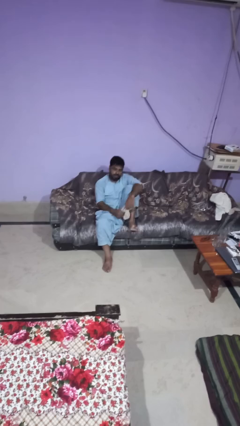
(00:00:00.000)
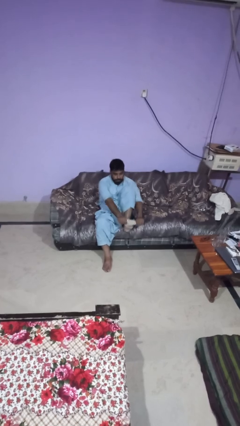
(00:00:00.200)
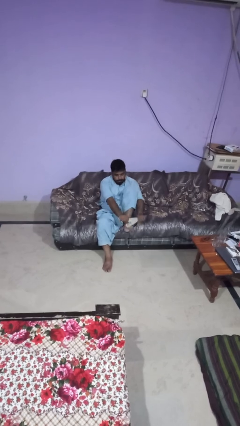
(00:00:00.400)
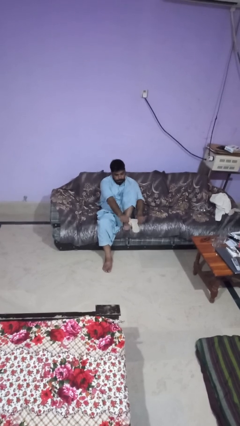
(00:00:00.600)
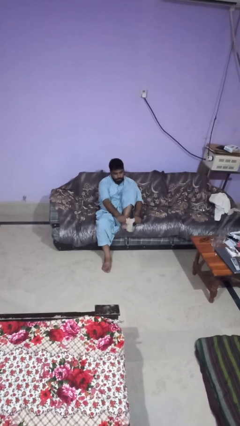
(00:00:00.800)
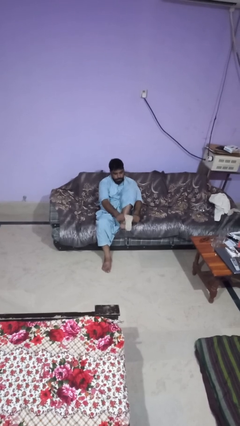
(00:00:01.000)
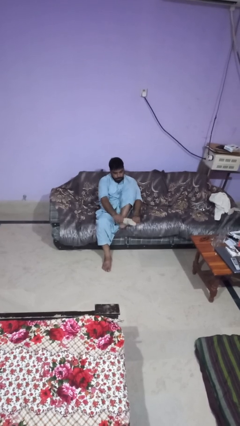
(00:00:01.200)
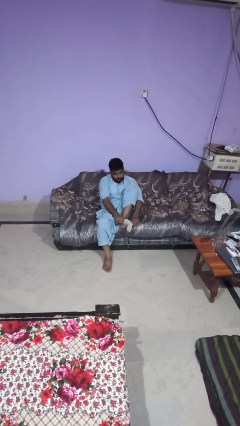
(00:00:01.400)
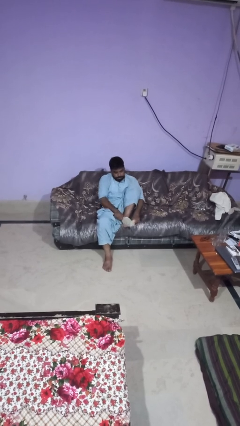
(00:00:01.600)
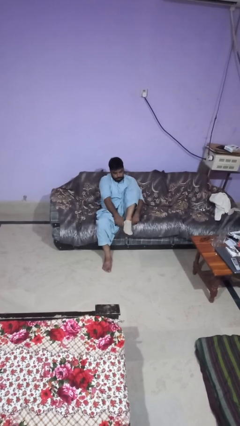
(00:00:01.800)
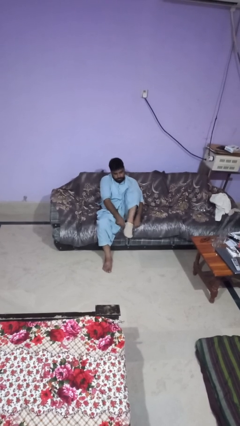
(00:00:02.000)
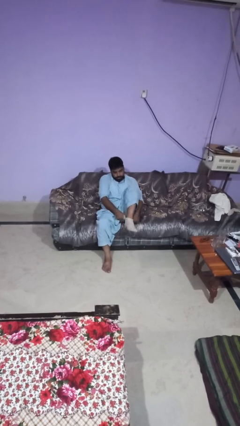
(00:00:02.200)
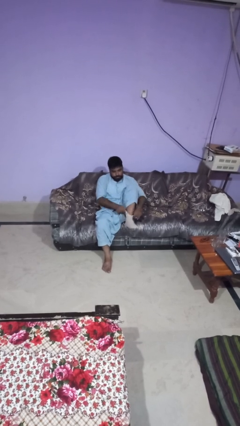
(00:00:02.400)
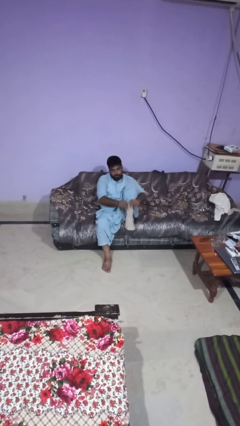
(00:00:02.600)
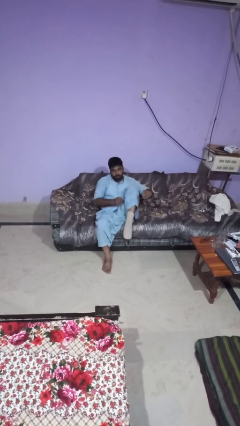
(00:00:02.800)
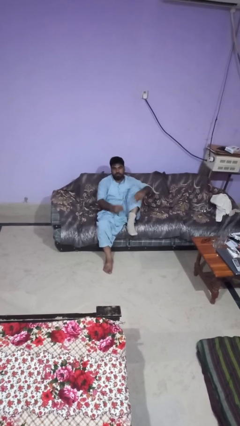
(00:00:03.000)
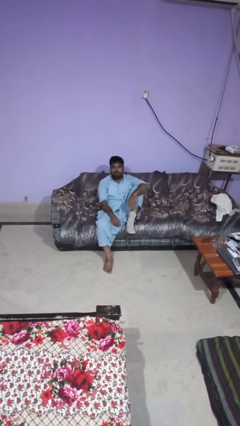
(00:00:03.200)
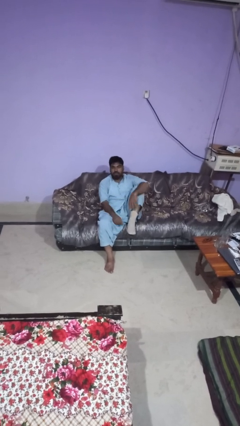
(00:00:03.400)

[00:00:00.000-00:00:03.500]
person puts on socks

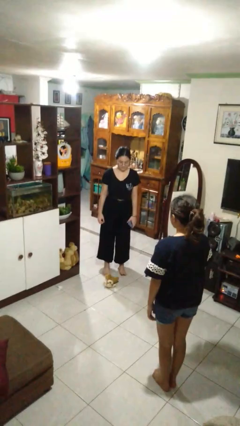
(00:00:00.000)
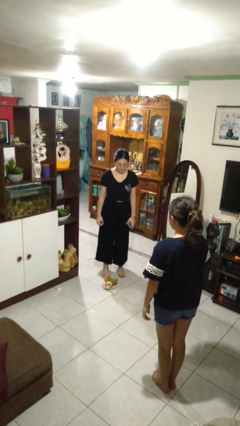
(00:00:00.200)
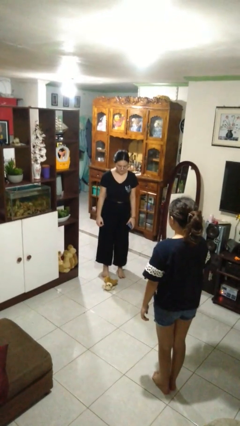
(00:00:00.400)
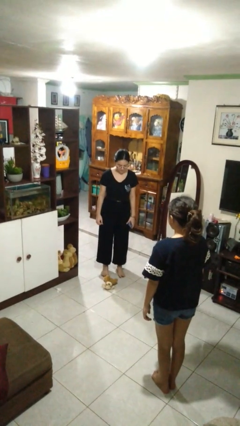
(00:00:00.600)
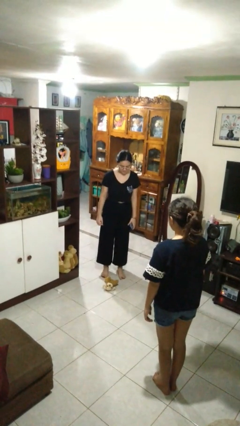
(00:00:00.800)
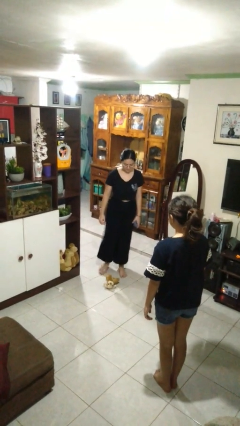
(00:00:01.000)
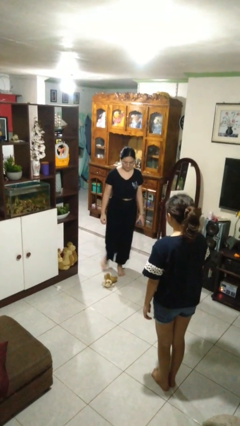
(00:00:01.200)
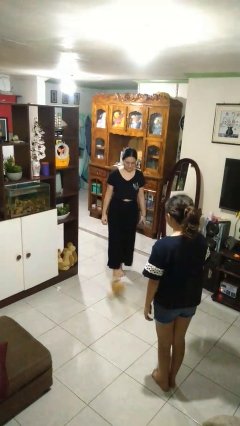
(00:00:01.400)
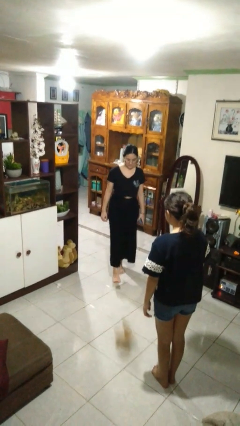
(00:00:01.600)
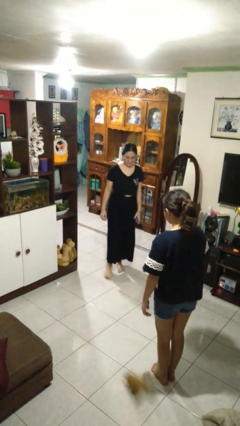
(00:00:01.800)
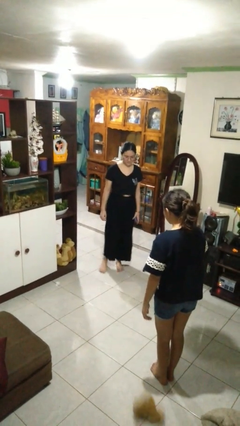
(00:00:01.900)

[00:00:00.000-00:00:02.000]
person kicks object to person

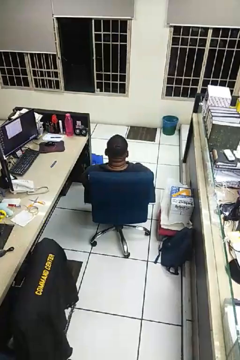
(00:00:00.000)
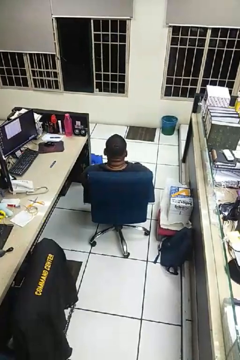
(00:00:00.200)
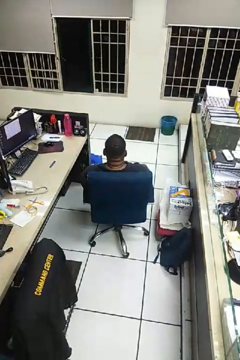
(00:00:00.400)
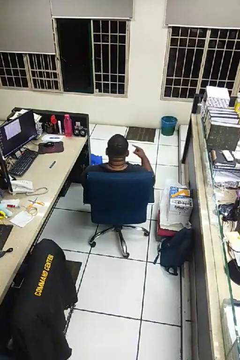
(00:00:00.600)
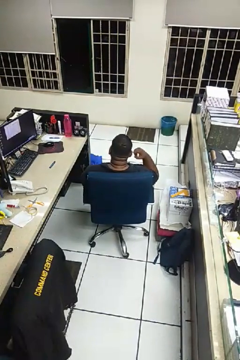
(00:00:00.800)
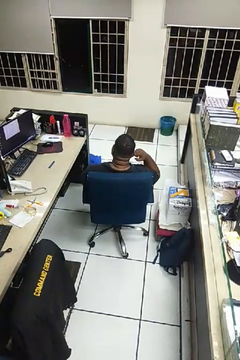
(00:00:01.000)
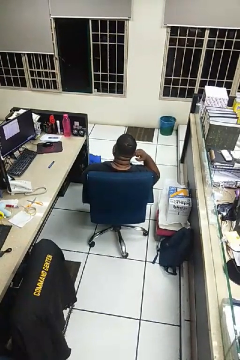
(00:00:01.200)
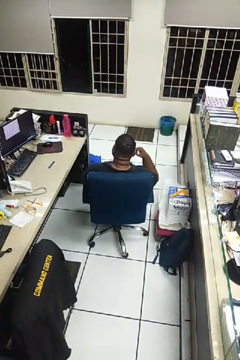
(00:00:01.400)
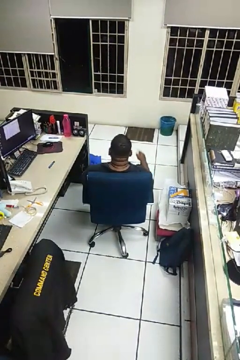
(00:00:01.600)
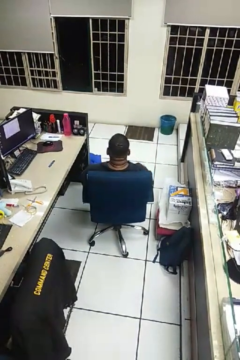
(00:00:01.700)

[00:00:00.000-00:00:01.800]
person gestures listen closely

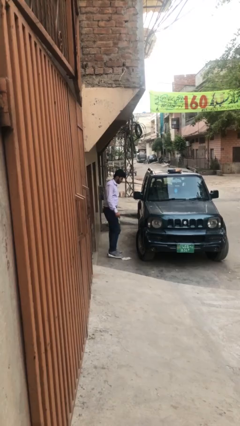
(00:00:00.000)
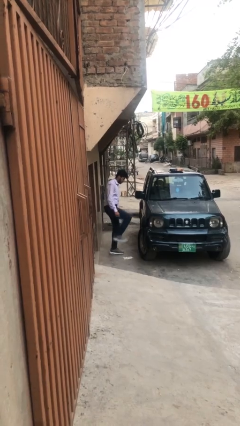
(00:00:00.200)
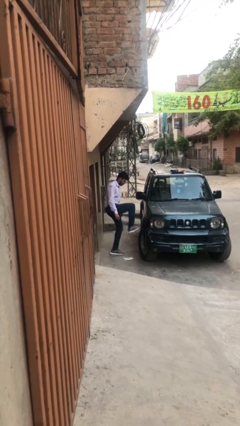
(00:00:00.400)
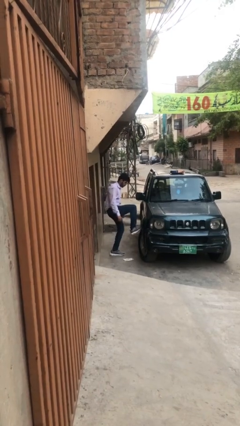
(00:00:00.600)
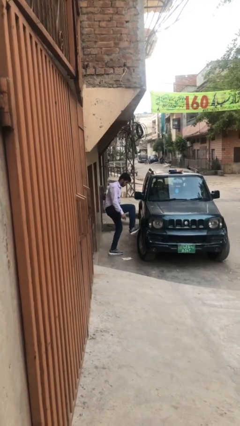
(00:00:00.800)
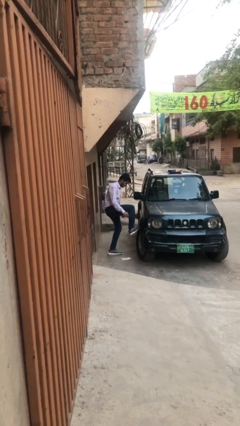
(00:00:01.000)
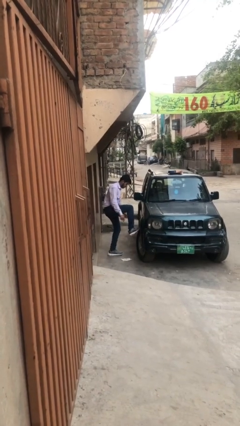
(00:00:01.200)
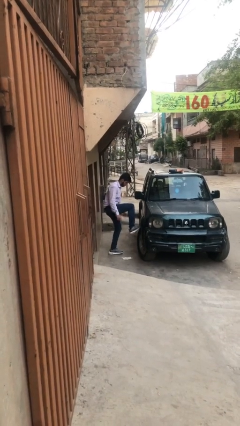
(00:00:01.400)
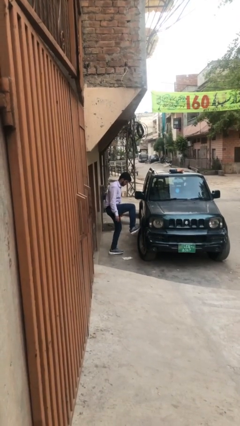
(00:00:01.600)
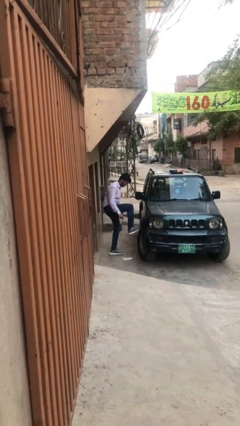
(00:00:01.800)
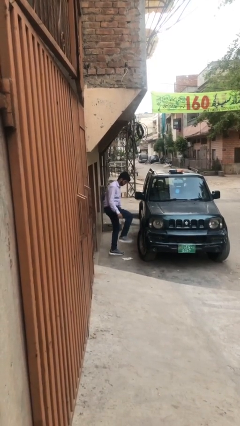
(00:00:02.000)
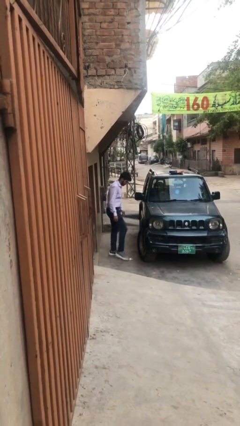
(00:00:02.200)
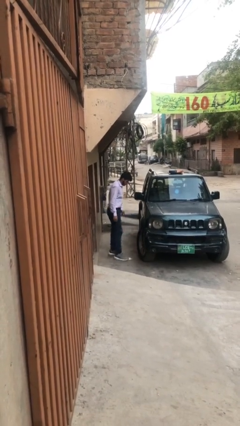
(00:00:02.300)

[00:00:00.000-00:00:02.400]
person kicks car tires

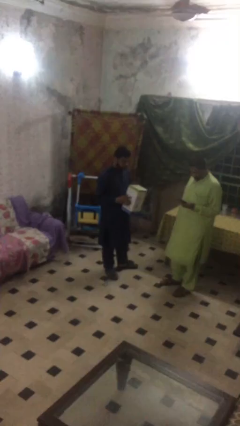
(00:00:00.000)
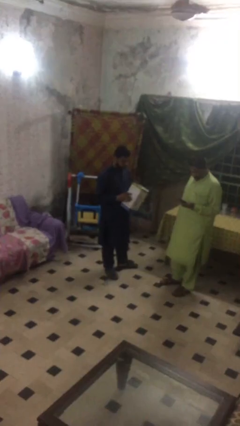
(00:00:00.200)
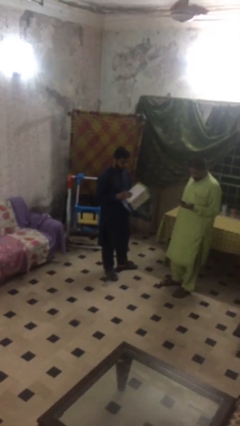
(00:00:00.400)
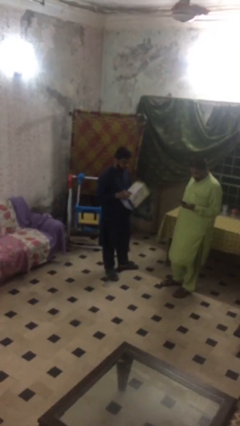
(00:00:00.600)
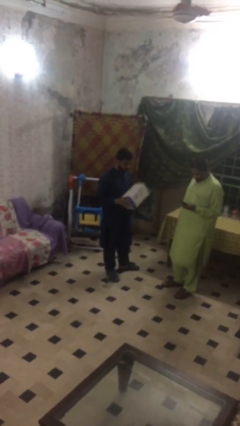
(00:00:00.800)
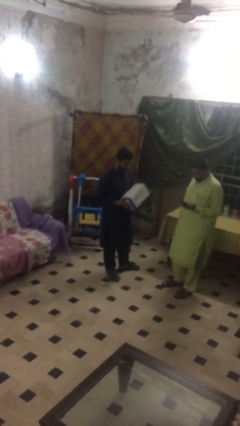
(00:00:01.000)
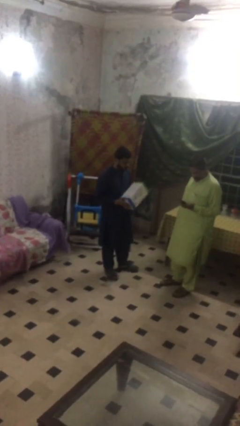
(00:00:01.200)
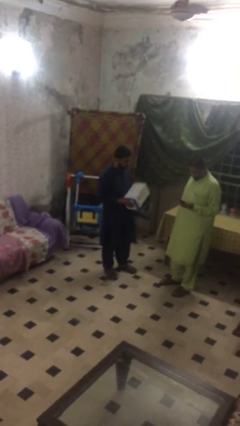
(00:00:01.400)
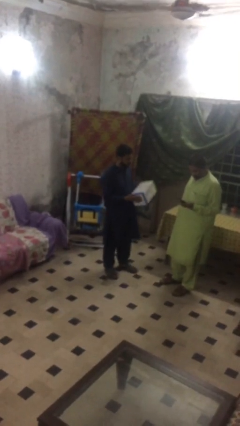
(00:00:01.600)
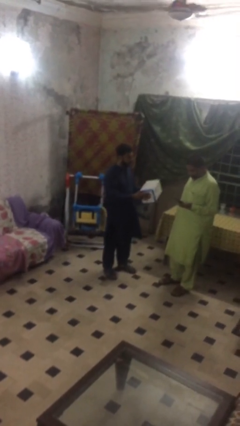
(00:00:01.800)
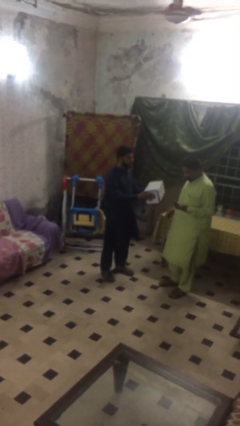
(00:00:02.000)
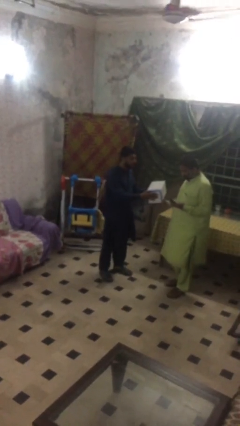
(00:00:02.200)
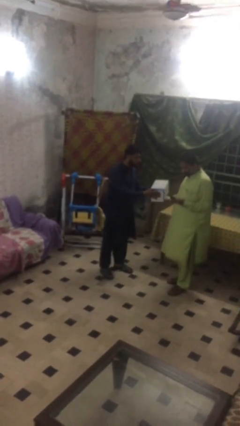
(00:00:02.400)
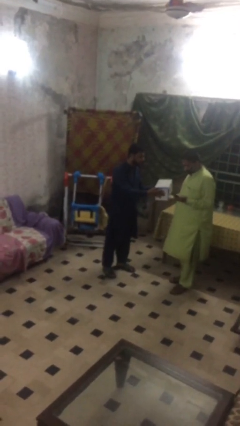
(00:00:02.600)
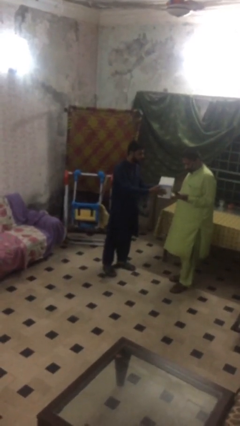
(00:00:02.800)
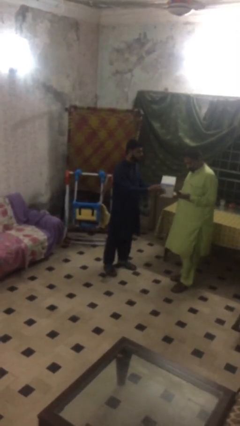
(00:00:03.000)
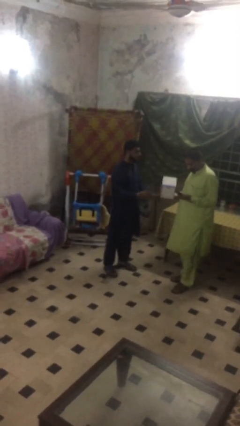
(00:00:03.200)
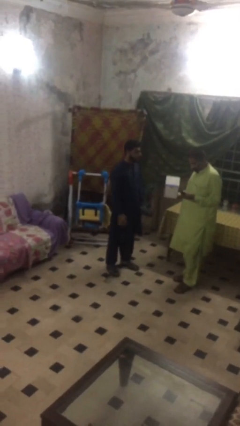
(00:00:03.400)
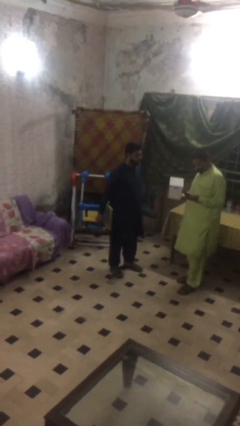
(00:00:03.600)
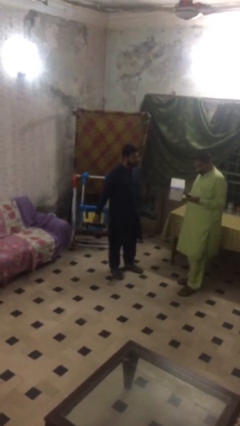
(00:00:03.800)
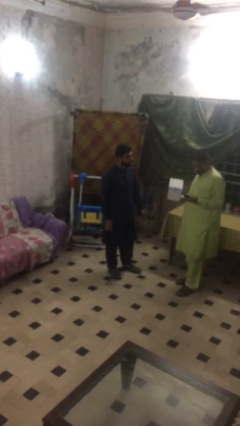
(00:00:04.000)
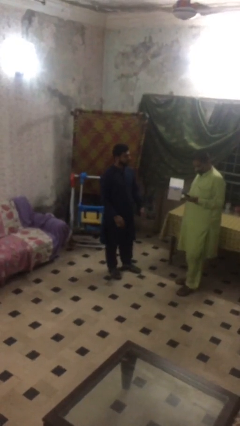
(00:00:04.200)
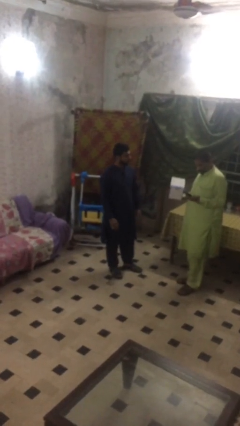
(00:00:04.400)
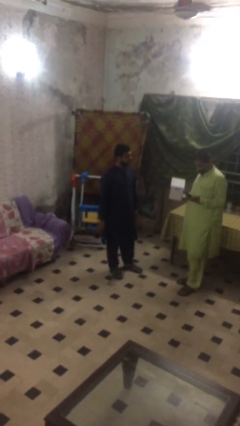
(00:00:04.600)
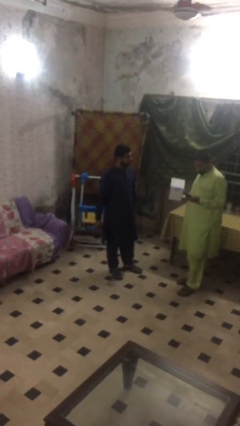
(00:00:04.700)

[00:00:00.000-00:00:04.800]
person transfers object to person

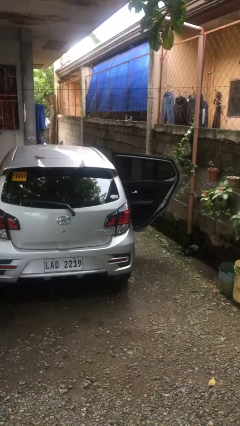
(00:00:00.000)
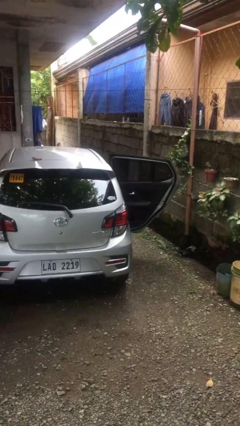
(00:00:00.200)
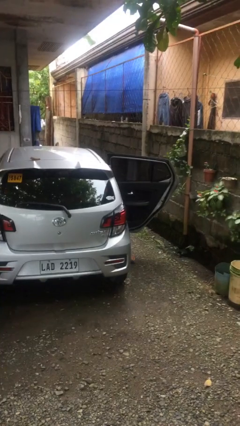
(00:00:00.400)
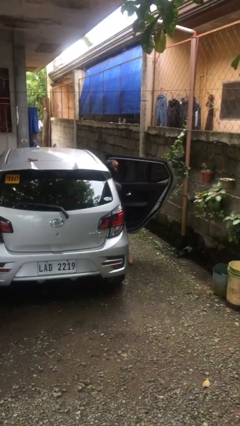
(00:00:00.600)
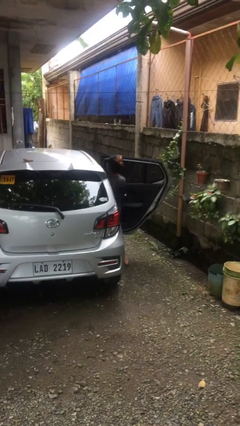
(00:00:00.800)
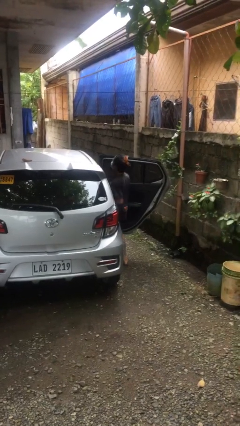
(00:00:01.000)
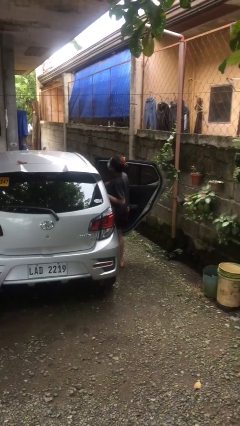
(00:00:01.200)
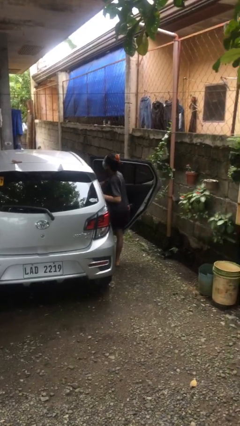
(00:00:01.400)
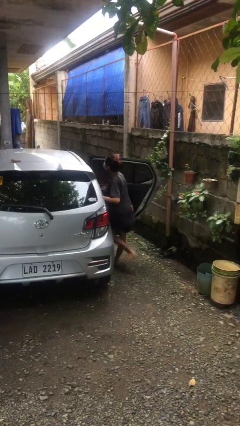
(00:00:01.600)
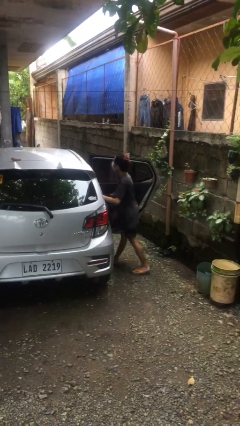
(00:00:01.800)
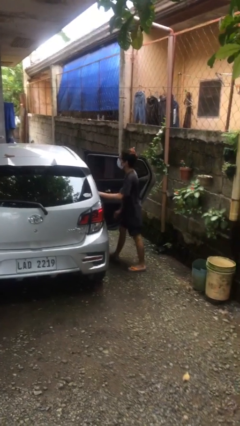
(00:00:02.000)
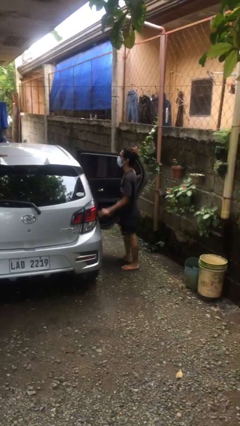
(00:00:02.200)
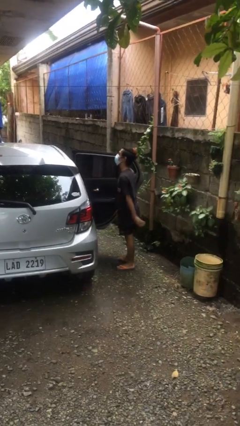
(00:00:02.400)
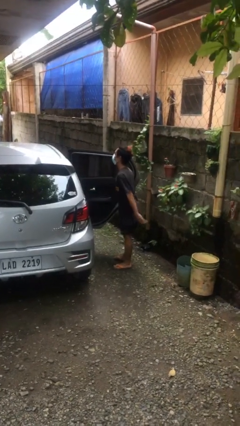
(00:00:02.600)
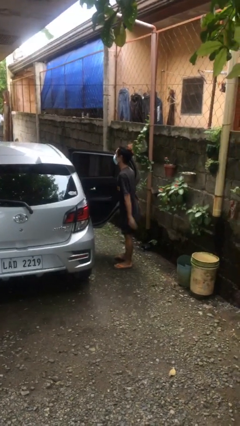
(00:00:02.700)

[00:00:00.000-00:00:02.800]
person exits car

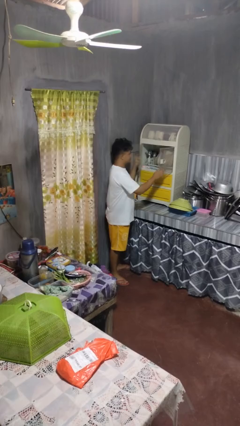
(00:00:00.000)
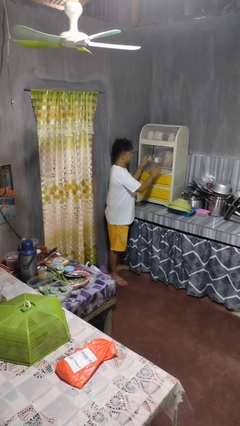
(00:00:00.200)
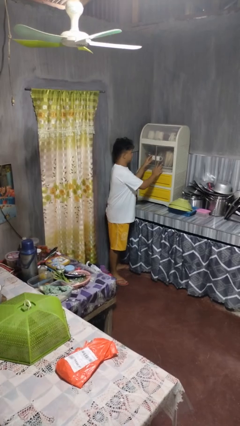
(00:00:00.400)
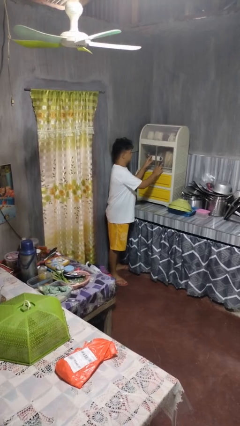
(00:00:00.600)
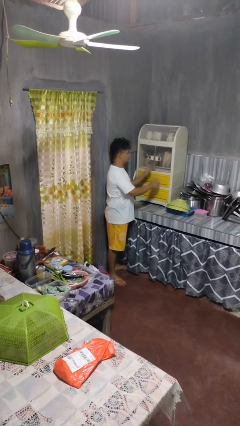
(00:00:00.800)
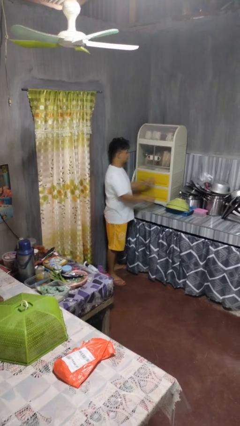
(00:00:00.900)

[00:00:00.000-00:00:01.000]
person closes cabinet
